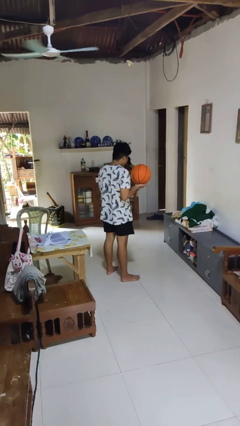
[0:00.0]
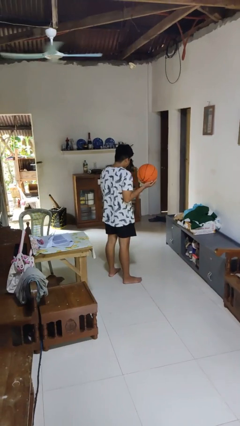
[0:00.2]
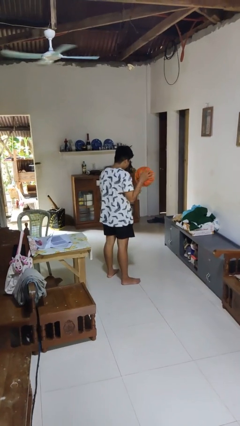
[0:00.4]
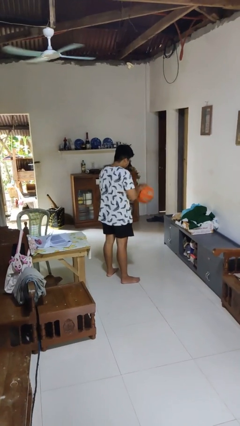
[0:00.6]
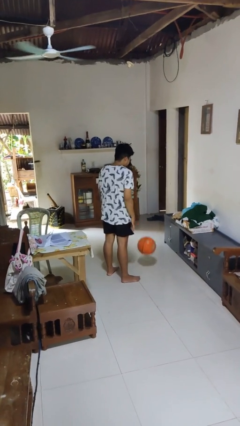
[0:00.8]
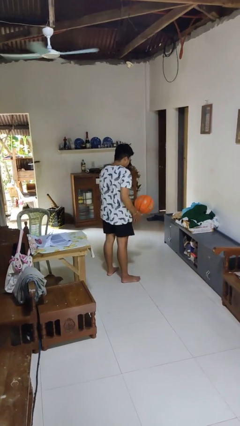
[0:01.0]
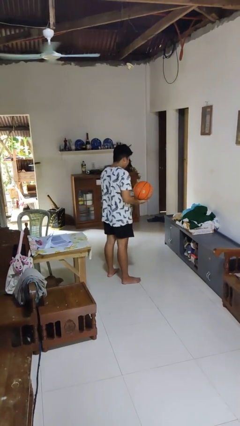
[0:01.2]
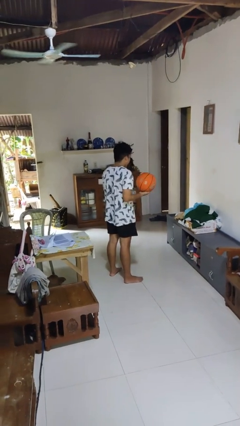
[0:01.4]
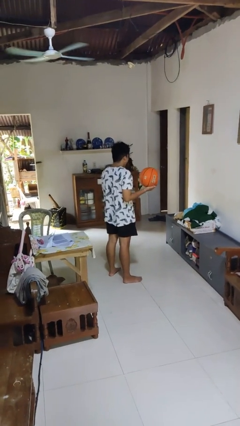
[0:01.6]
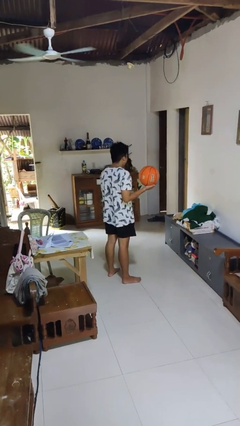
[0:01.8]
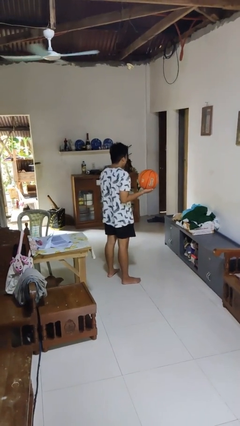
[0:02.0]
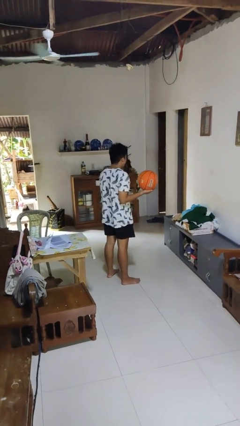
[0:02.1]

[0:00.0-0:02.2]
person bounces ball on floor

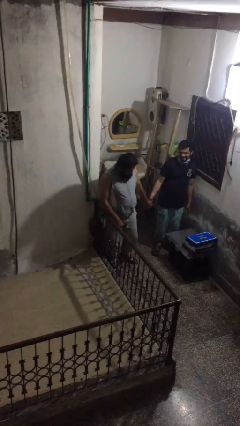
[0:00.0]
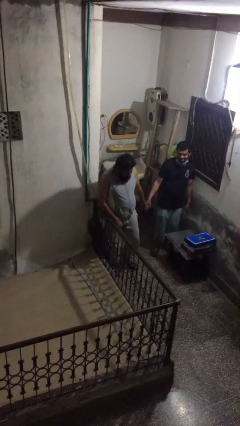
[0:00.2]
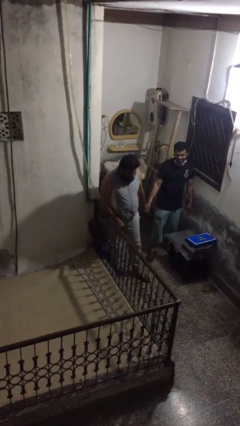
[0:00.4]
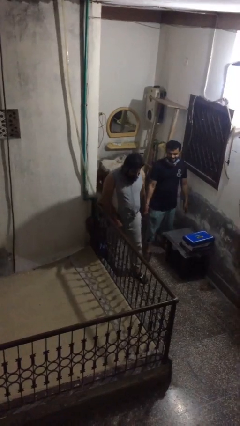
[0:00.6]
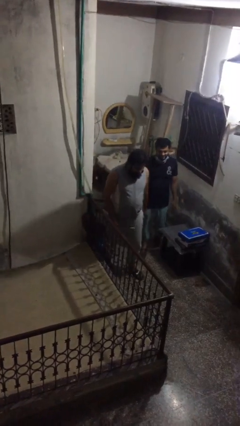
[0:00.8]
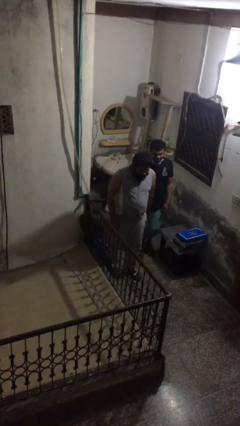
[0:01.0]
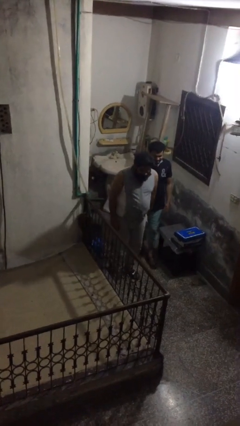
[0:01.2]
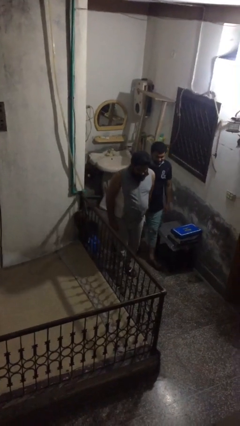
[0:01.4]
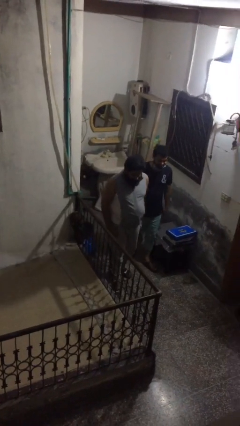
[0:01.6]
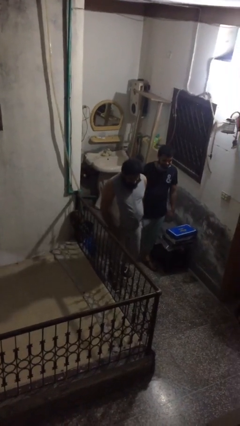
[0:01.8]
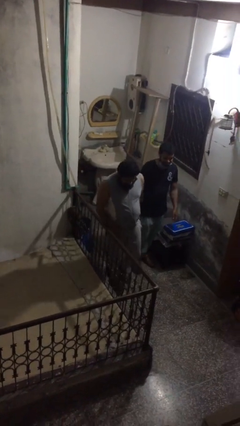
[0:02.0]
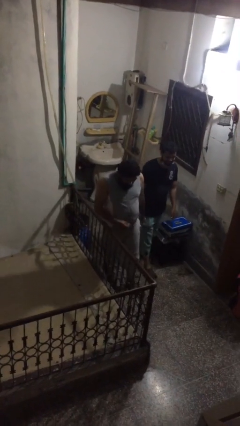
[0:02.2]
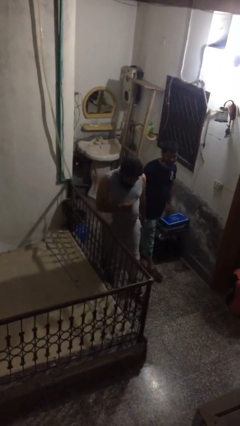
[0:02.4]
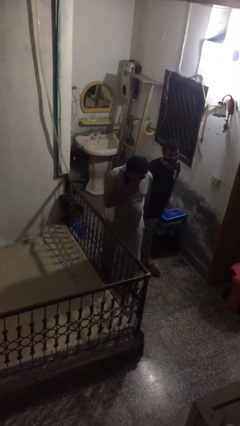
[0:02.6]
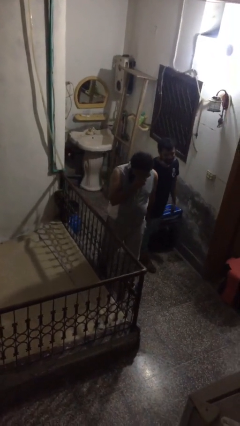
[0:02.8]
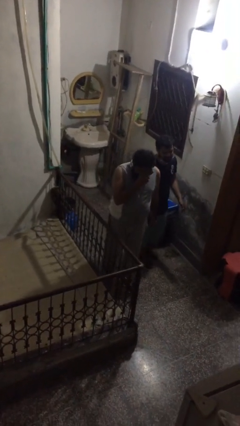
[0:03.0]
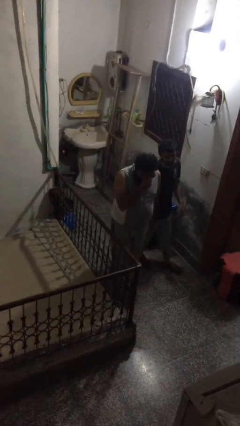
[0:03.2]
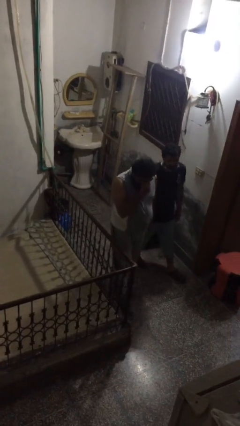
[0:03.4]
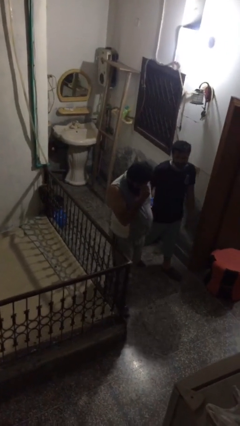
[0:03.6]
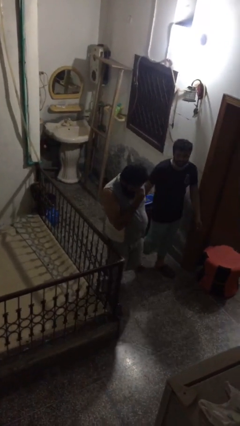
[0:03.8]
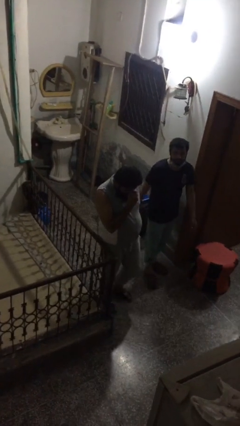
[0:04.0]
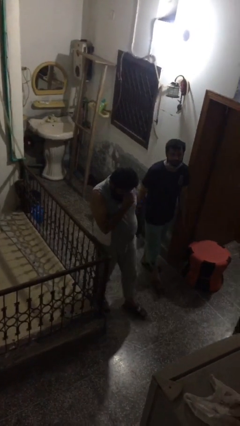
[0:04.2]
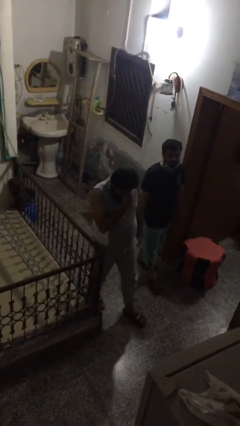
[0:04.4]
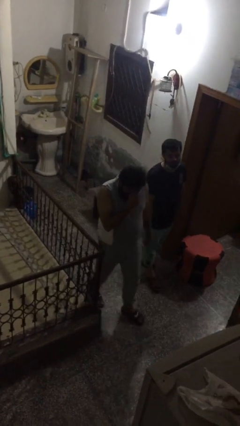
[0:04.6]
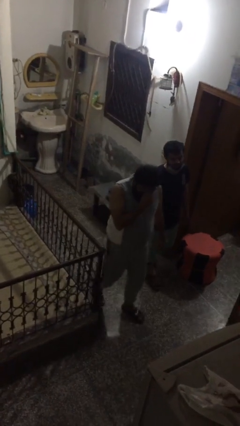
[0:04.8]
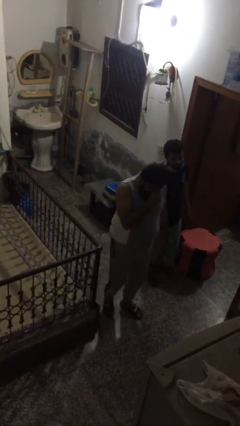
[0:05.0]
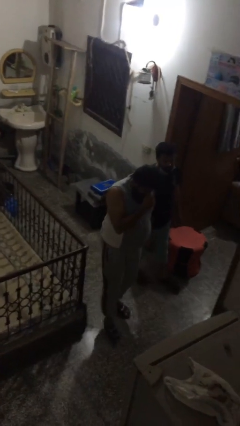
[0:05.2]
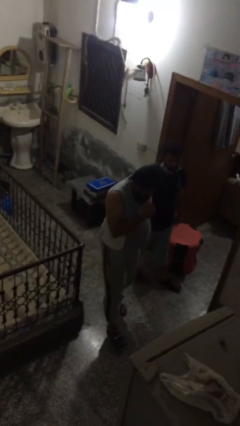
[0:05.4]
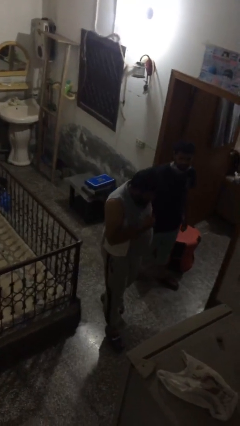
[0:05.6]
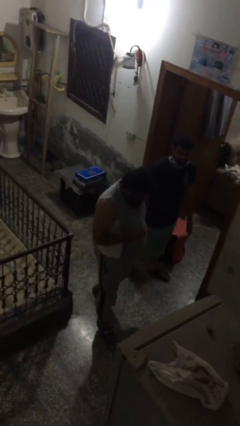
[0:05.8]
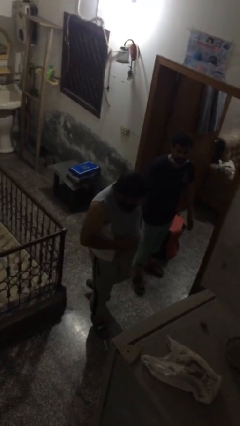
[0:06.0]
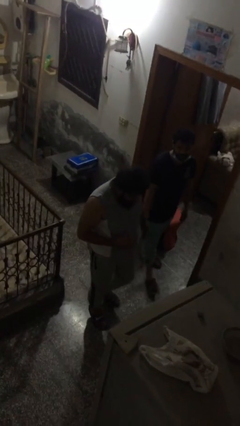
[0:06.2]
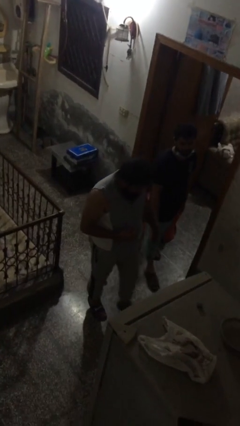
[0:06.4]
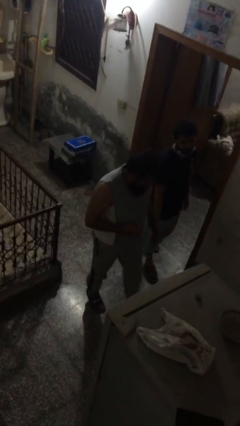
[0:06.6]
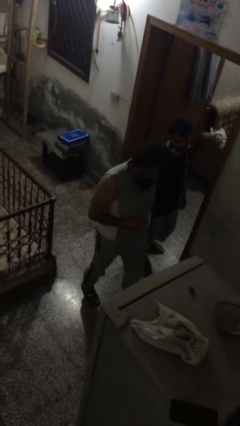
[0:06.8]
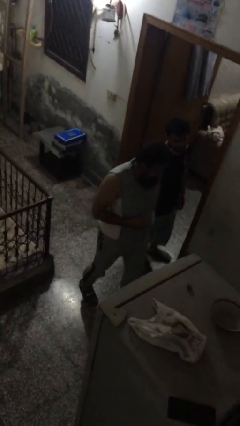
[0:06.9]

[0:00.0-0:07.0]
person holds hand

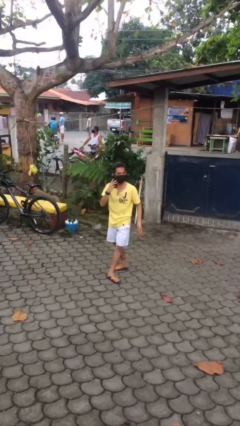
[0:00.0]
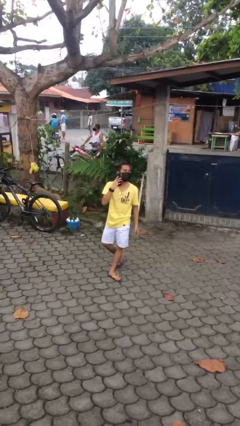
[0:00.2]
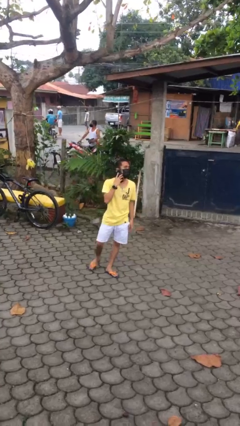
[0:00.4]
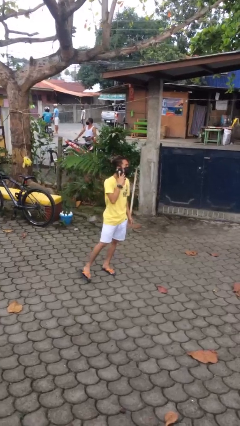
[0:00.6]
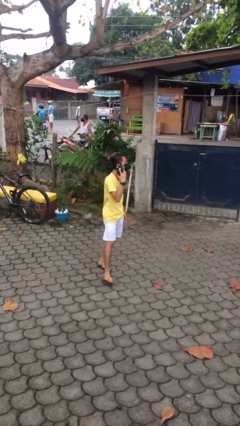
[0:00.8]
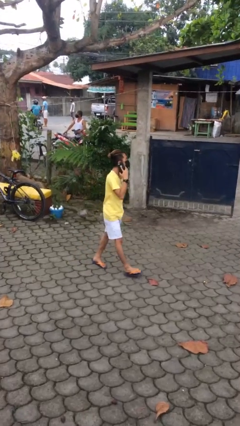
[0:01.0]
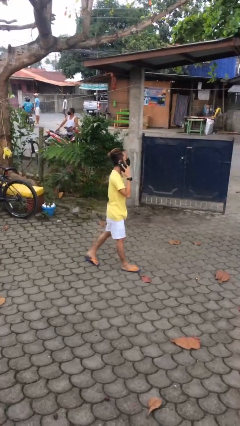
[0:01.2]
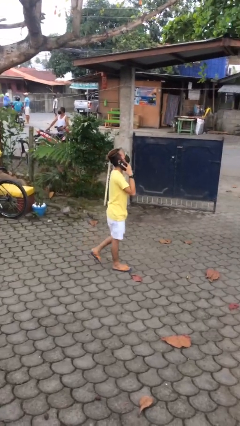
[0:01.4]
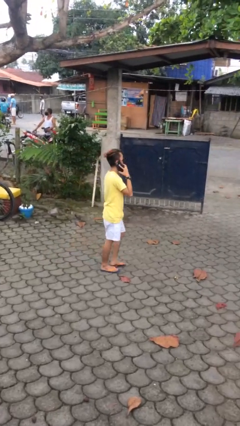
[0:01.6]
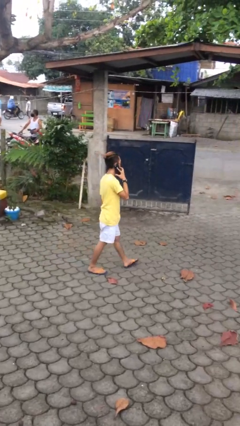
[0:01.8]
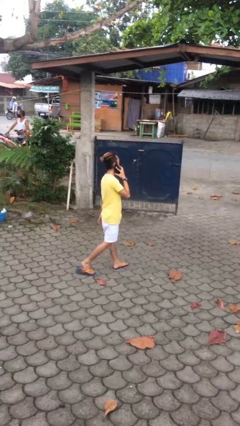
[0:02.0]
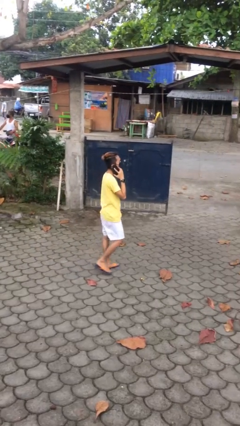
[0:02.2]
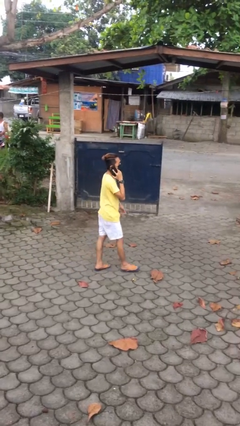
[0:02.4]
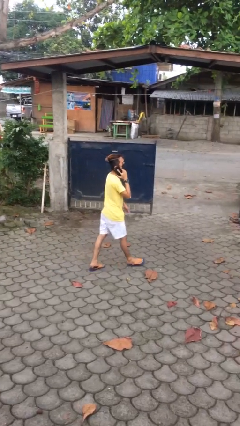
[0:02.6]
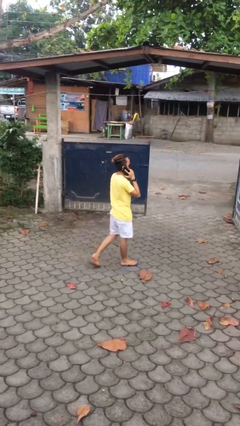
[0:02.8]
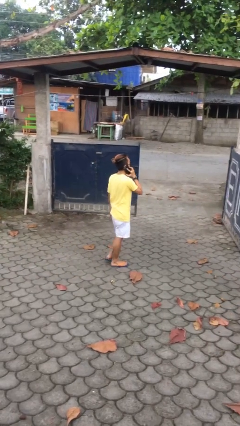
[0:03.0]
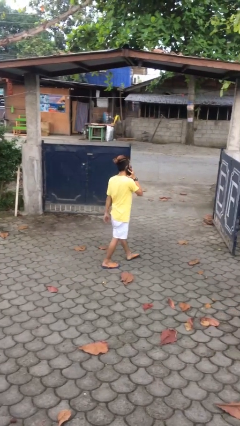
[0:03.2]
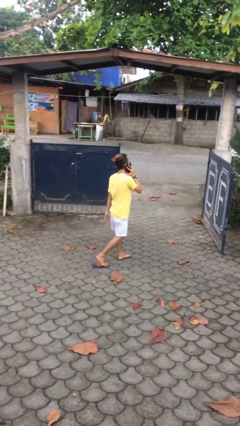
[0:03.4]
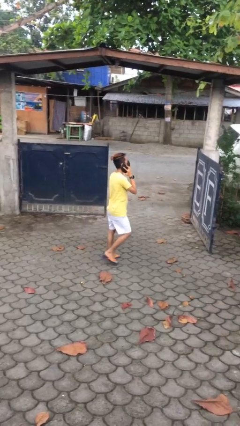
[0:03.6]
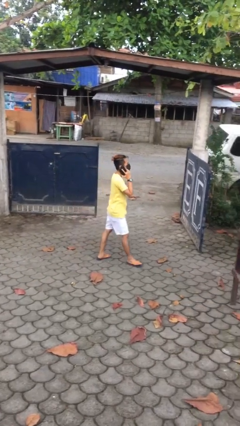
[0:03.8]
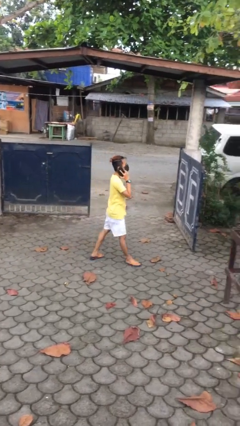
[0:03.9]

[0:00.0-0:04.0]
person talks on phone

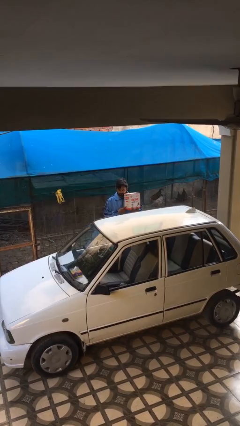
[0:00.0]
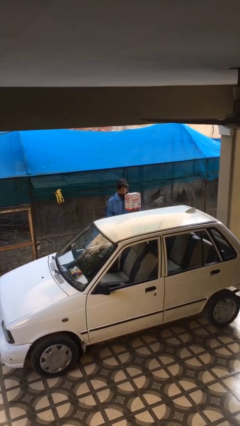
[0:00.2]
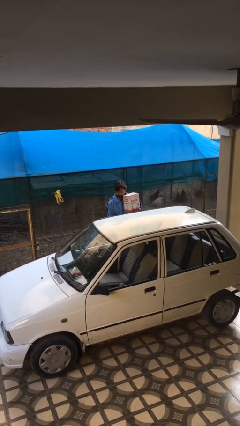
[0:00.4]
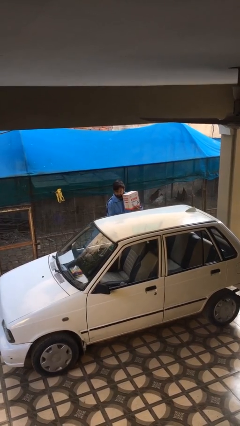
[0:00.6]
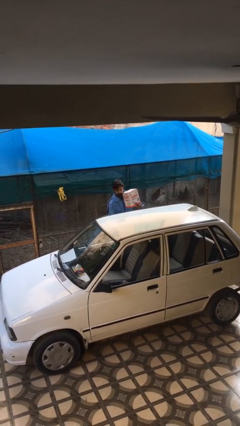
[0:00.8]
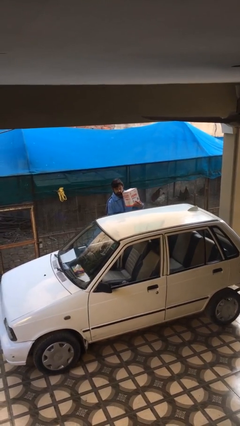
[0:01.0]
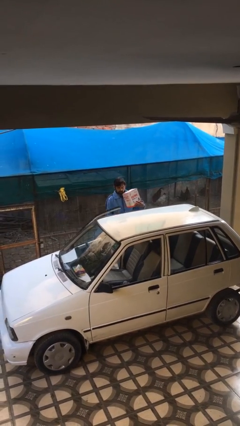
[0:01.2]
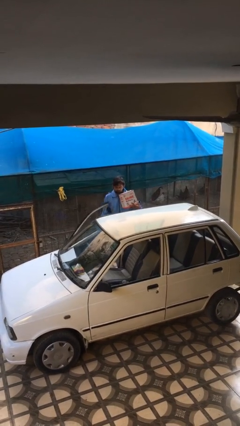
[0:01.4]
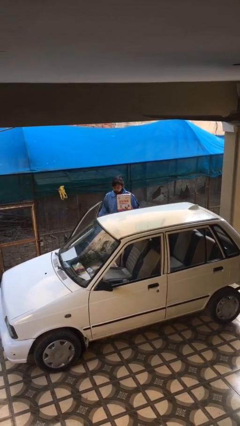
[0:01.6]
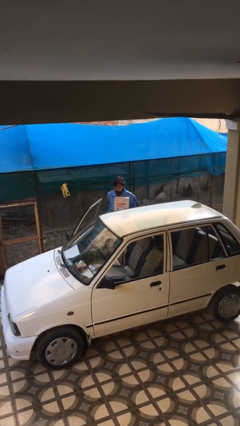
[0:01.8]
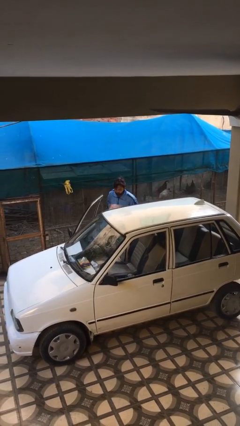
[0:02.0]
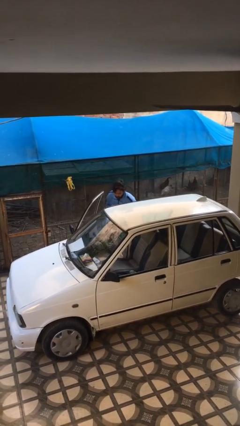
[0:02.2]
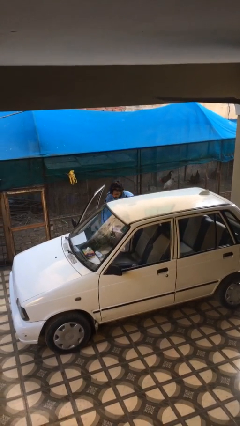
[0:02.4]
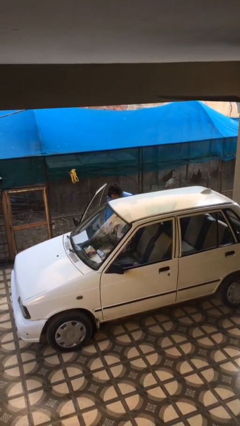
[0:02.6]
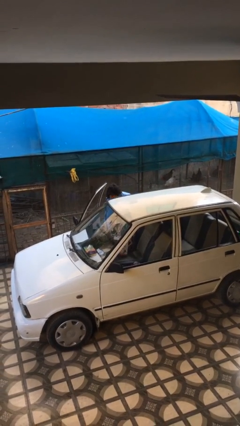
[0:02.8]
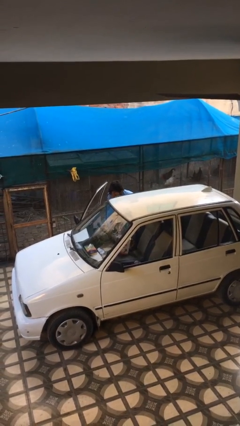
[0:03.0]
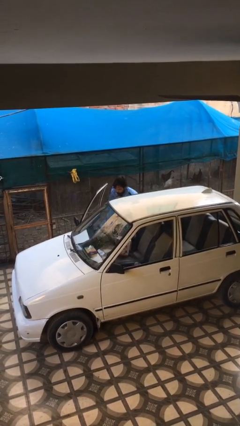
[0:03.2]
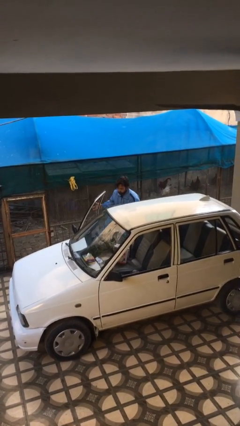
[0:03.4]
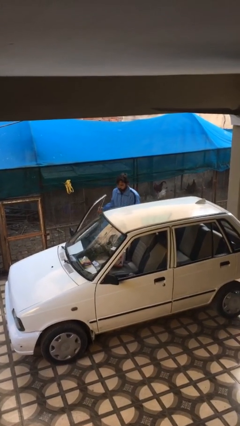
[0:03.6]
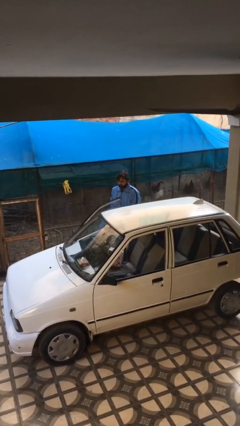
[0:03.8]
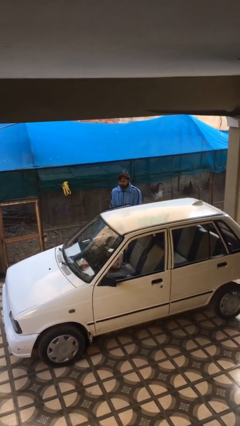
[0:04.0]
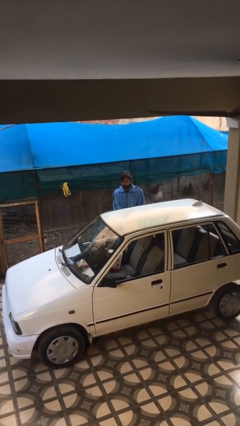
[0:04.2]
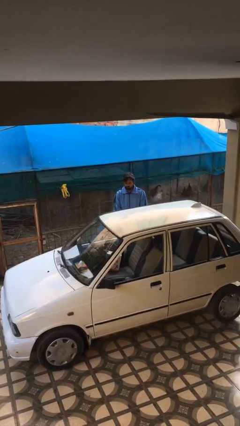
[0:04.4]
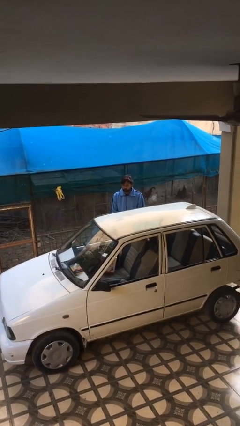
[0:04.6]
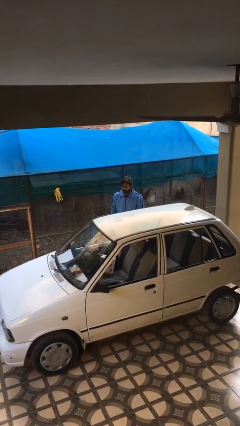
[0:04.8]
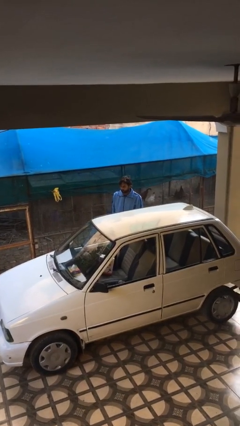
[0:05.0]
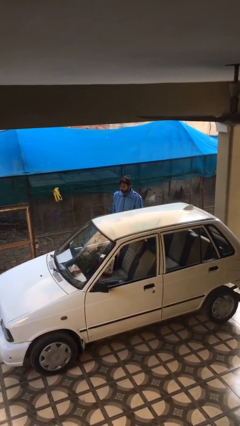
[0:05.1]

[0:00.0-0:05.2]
person loads car
